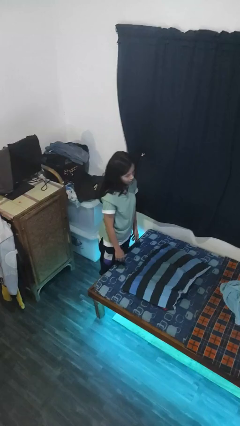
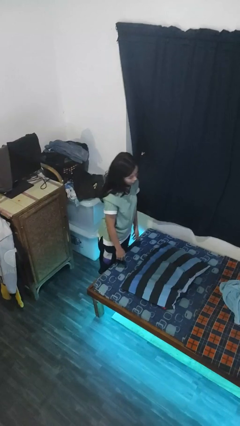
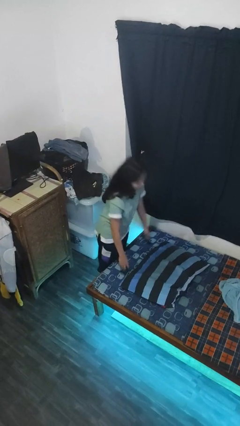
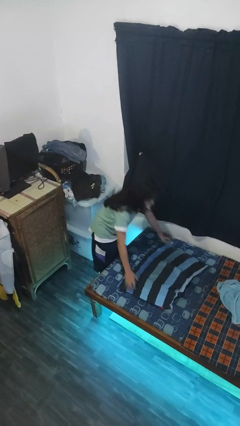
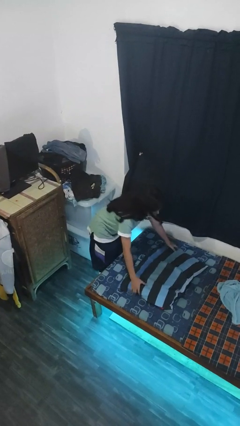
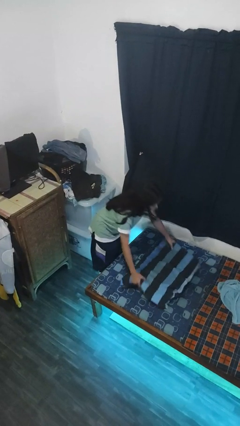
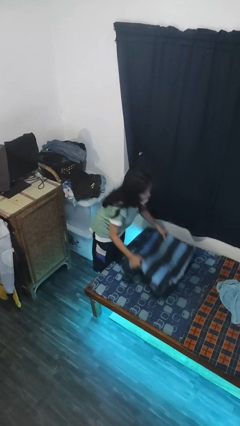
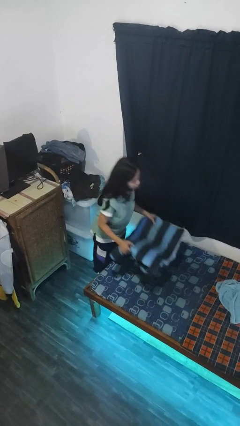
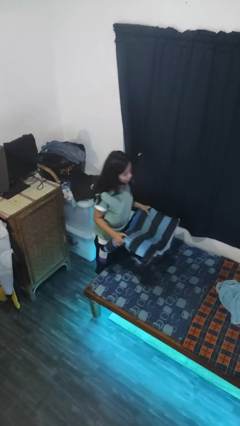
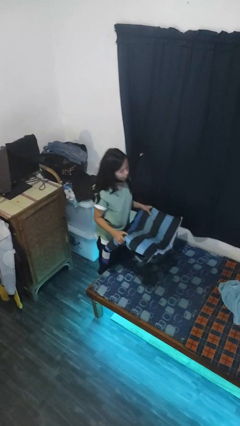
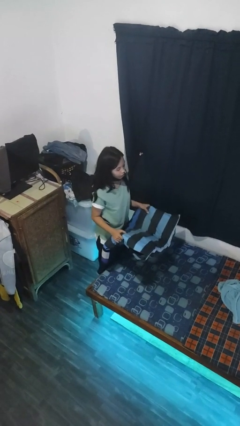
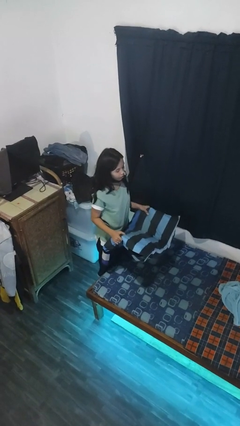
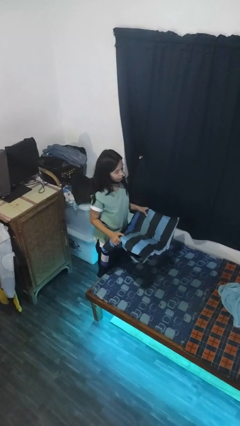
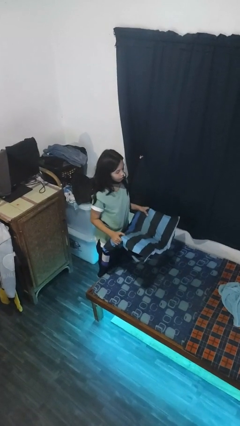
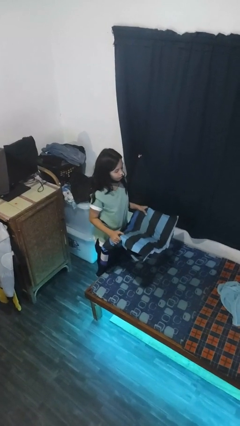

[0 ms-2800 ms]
person picks up object from bed

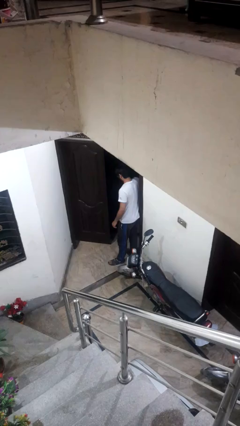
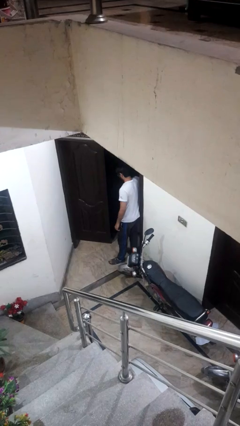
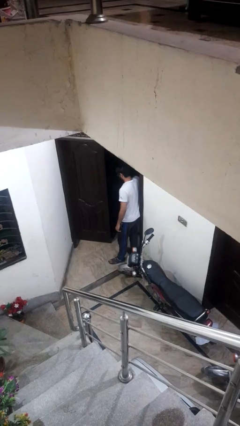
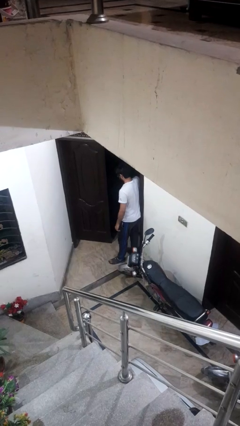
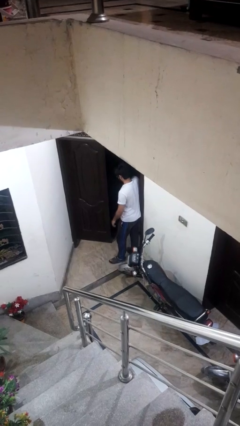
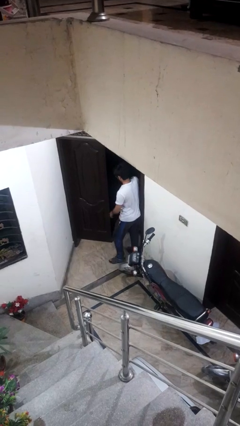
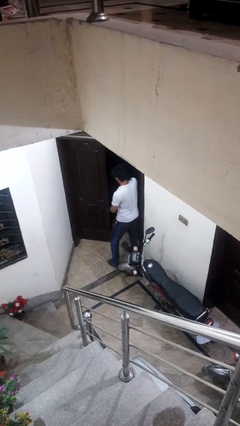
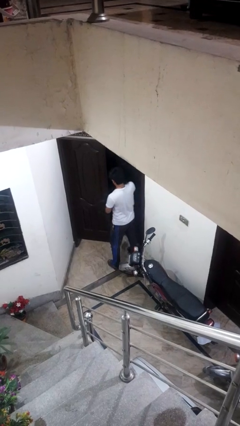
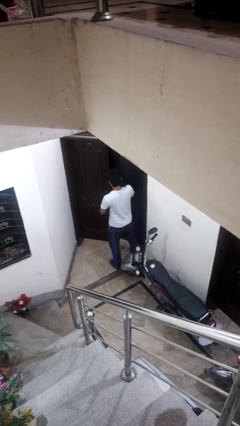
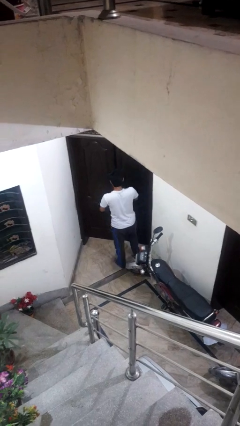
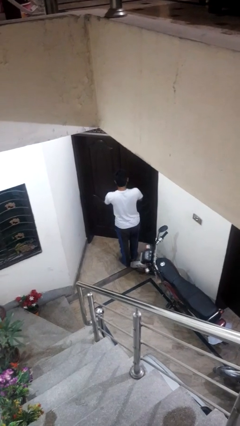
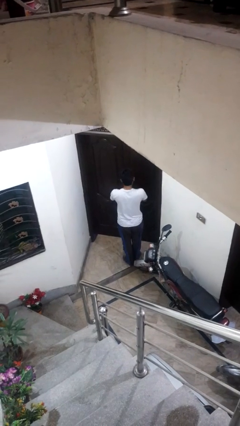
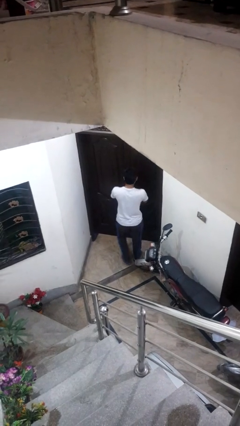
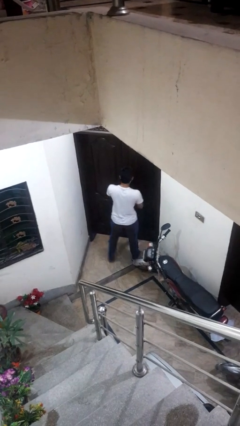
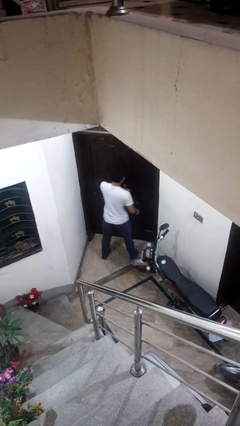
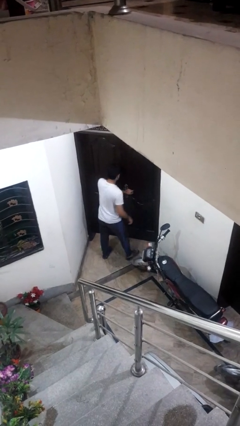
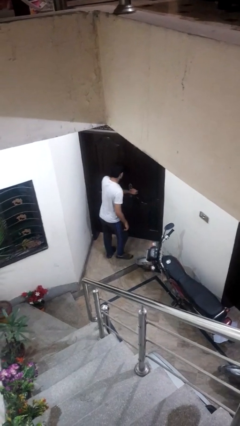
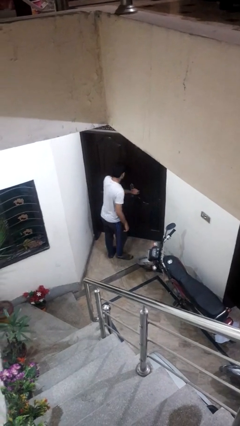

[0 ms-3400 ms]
person closes facility door

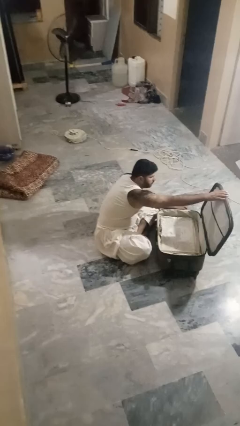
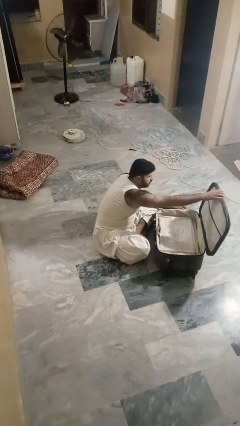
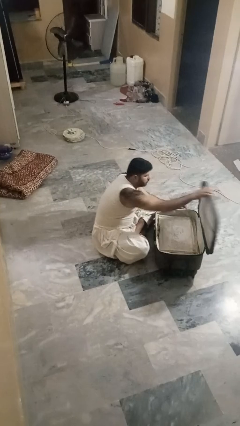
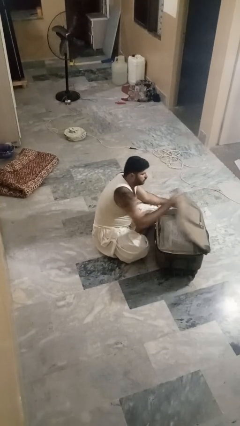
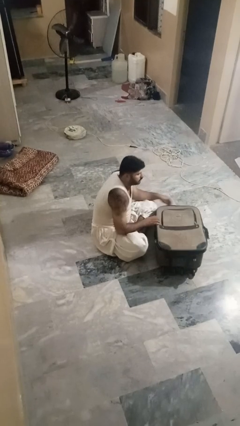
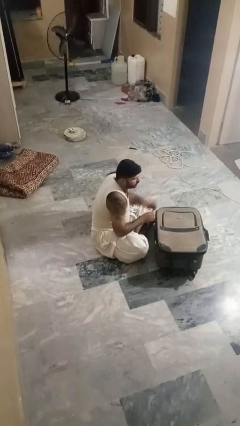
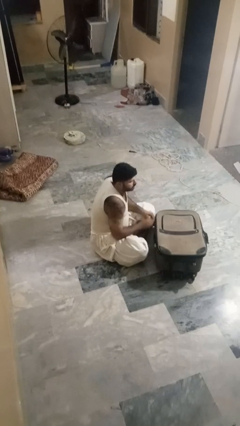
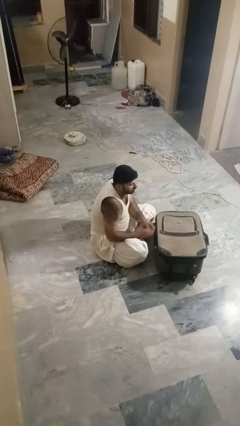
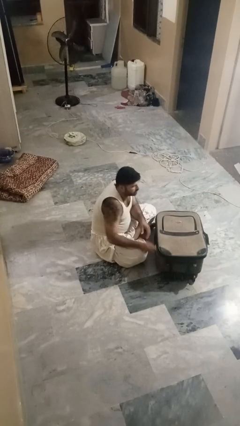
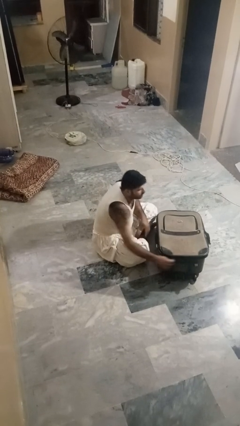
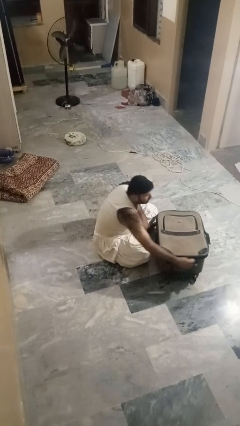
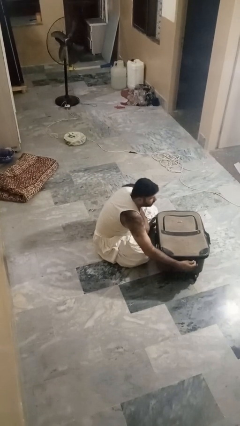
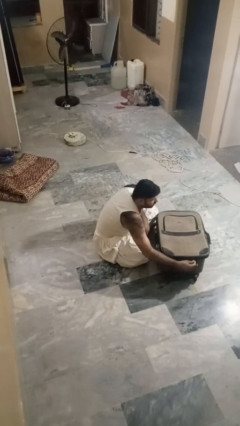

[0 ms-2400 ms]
person closes suitcase

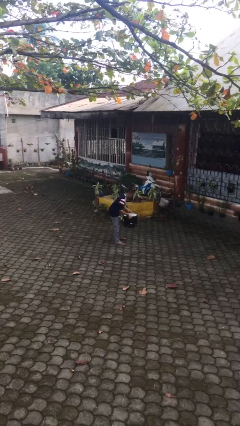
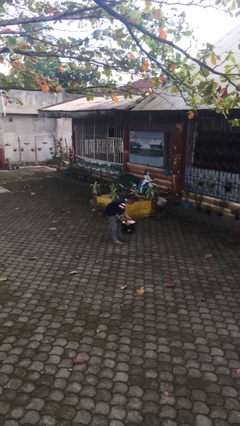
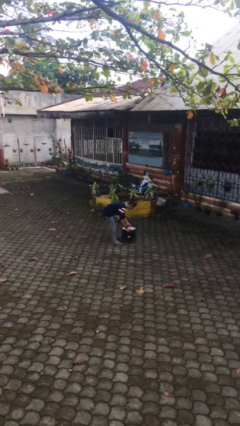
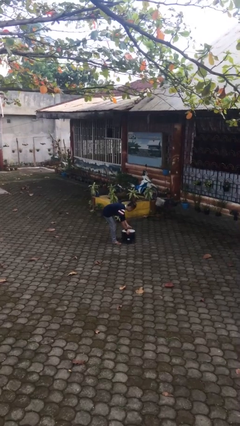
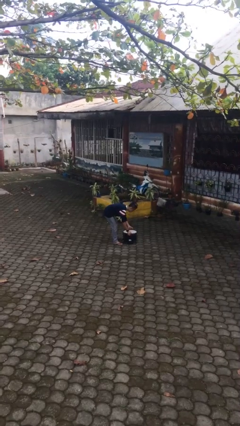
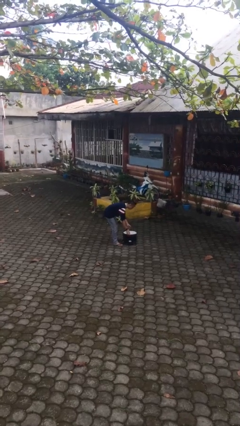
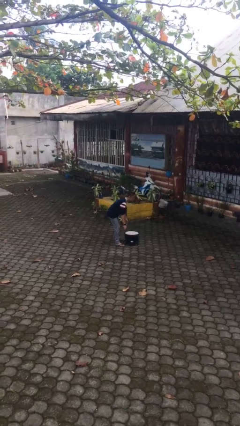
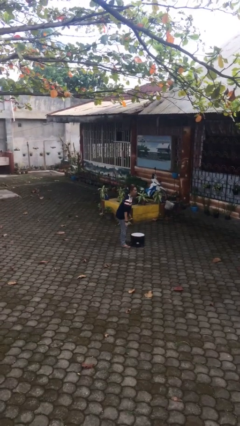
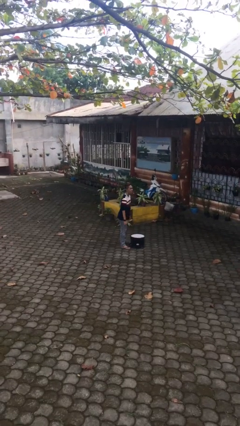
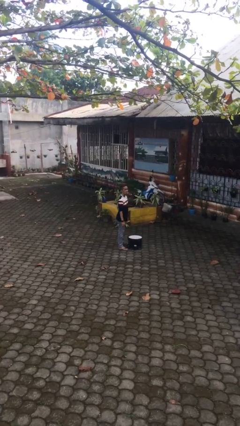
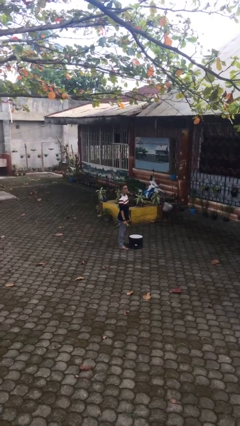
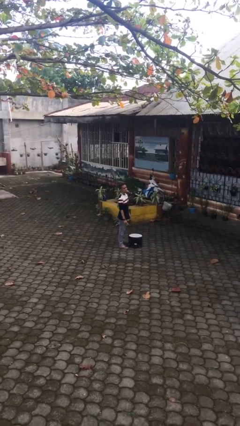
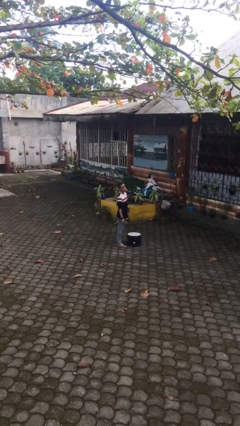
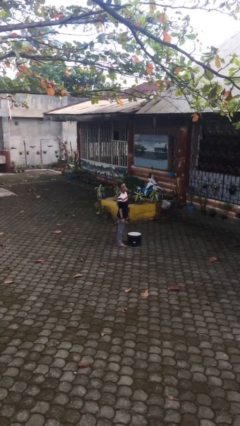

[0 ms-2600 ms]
person puts down object on floor

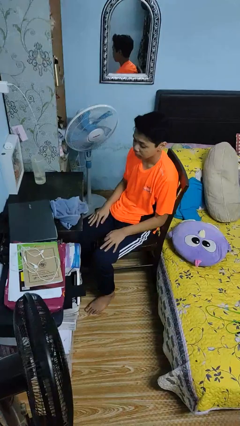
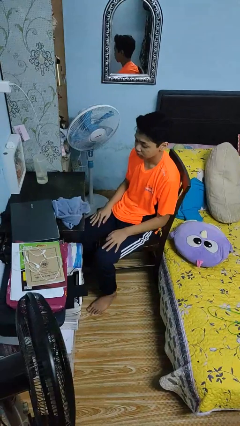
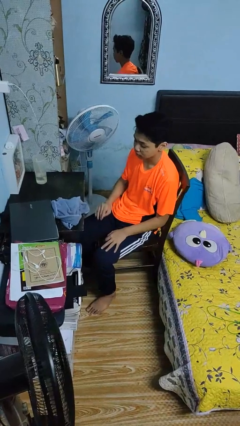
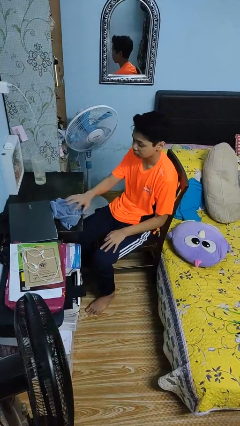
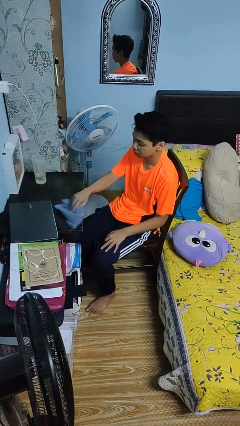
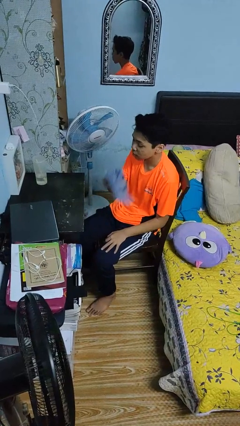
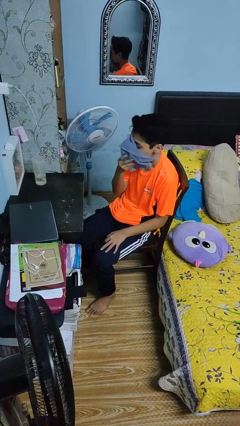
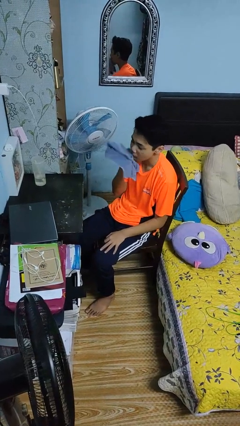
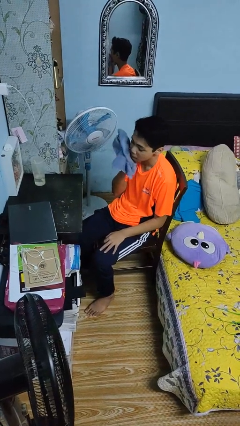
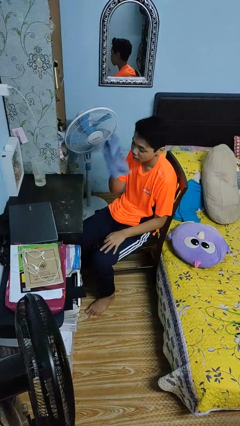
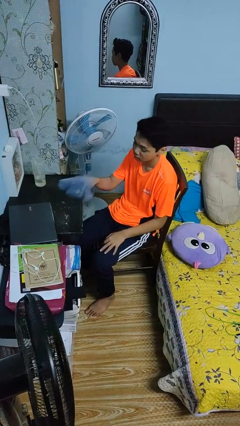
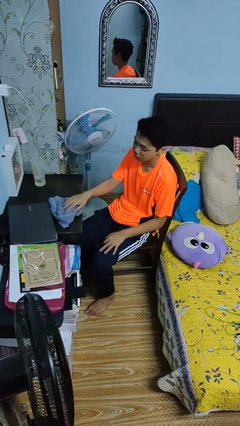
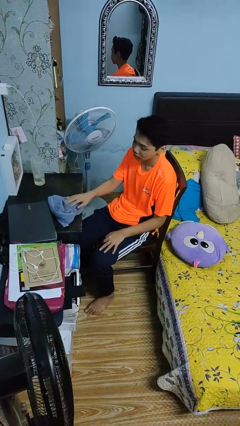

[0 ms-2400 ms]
person wipes mouth with napkin

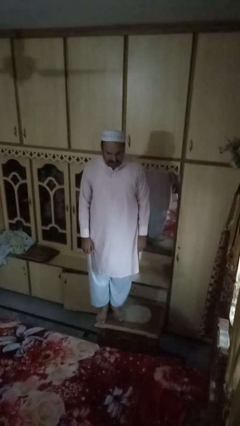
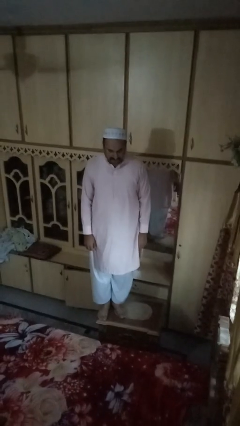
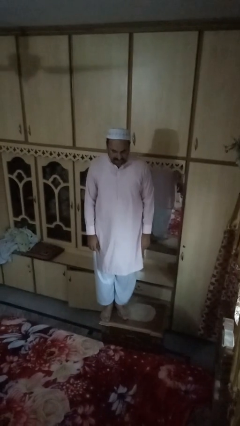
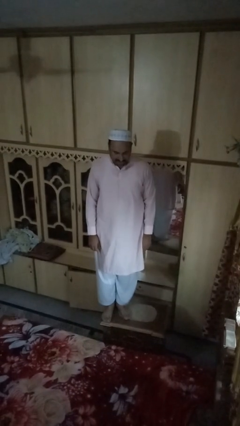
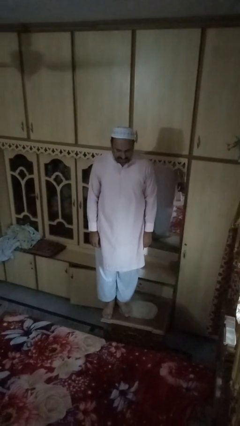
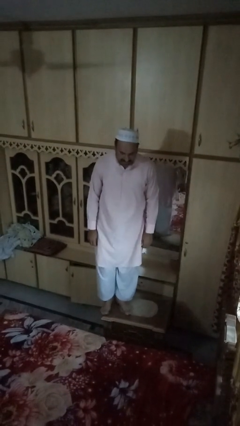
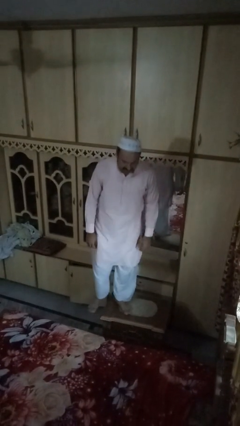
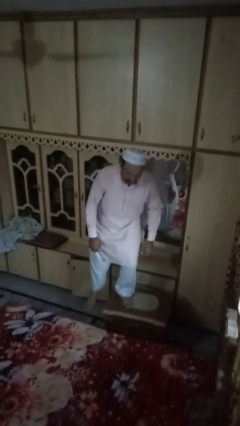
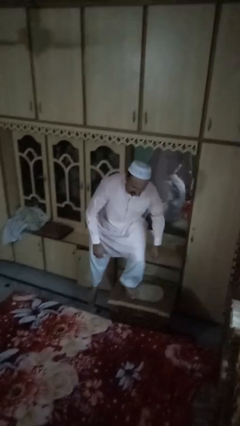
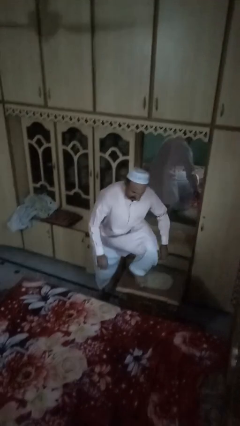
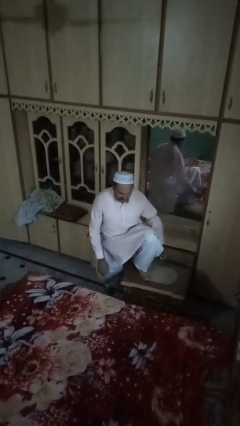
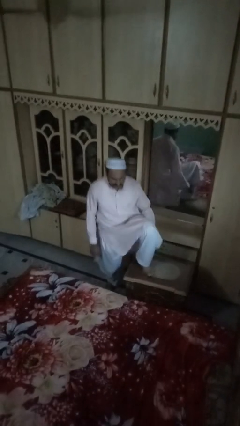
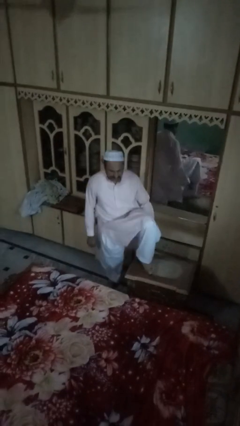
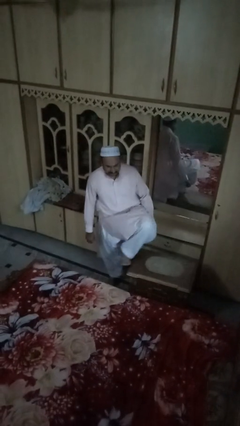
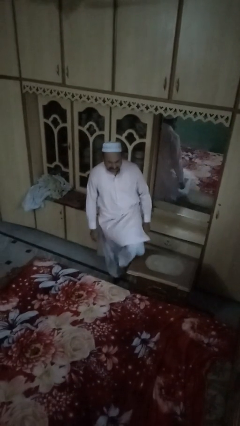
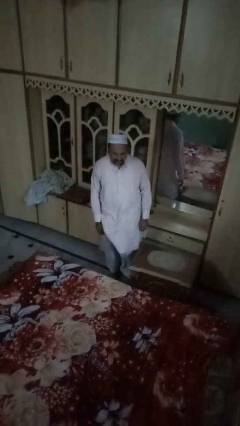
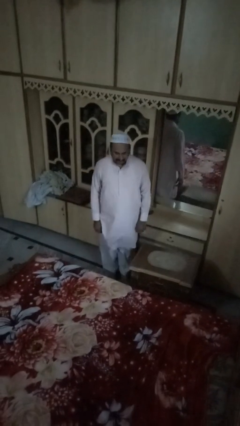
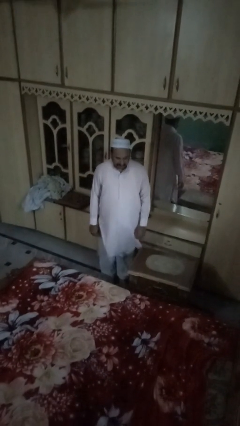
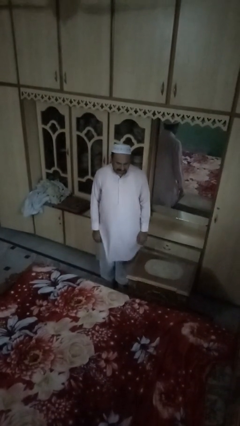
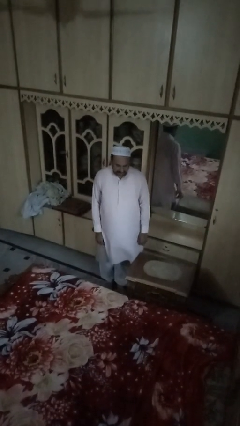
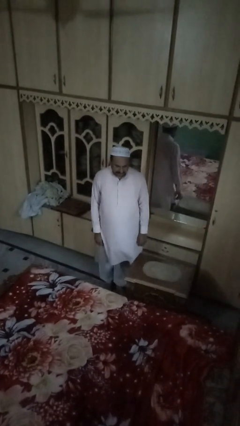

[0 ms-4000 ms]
person climbs off table
